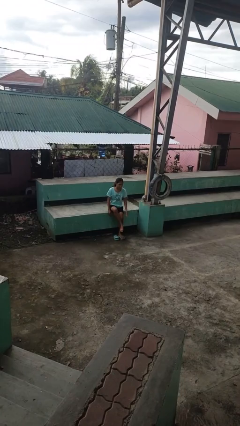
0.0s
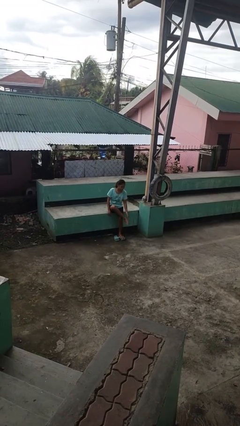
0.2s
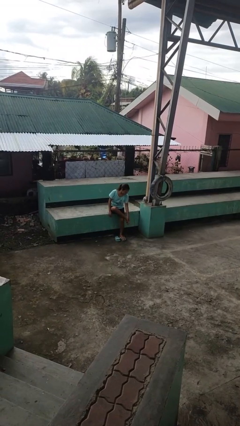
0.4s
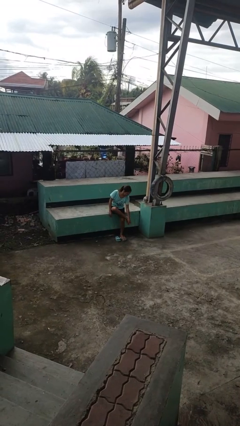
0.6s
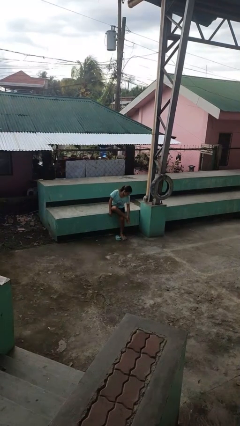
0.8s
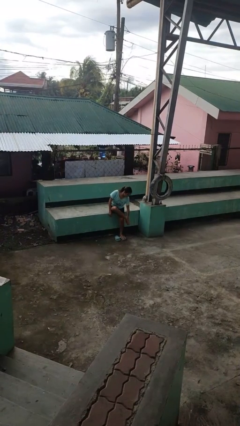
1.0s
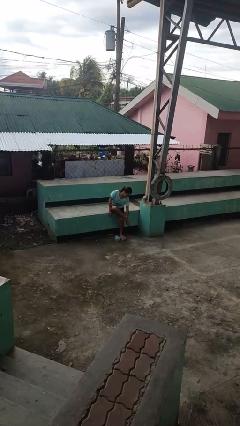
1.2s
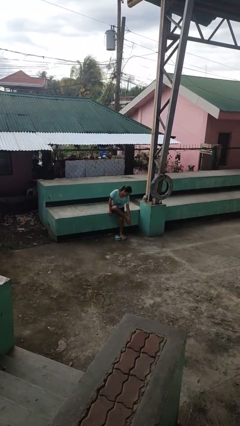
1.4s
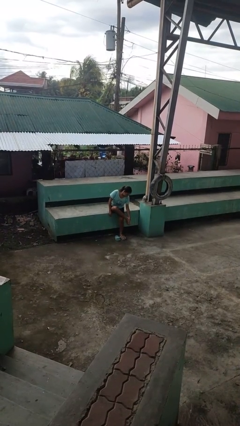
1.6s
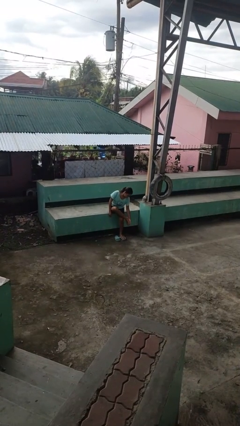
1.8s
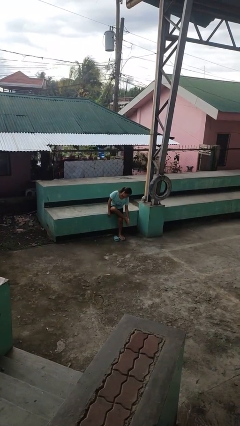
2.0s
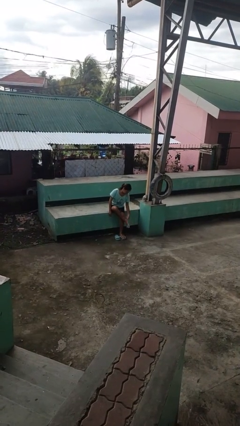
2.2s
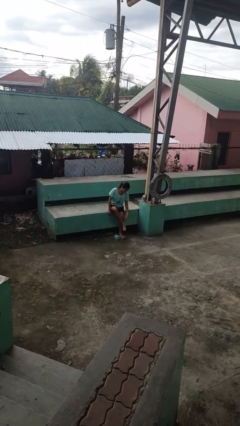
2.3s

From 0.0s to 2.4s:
person rubs foot

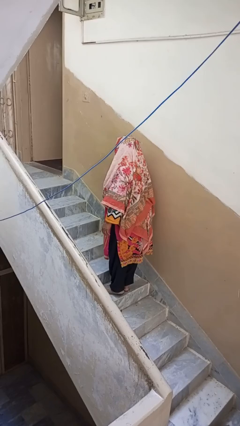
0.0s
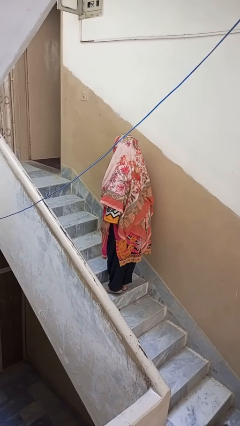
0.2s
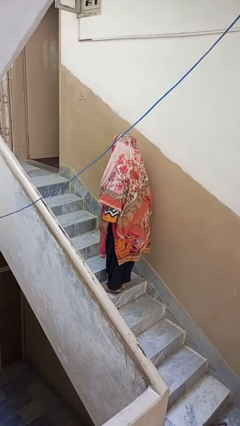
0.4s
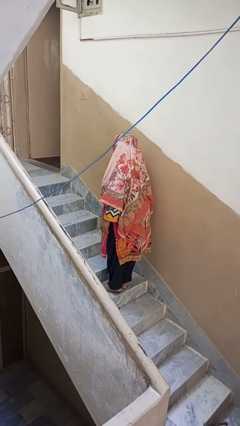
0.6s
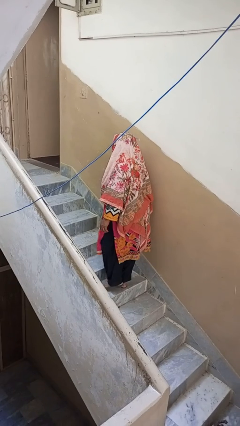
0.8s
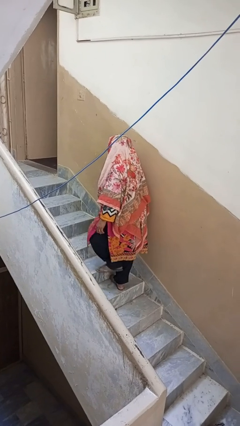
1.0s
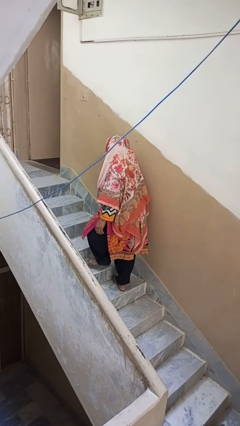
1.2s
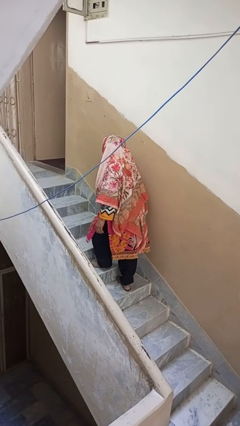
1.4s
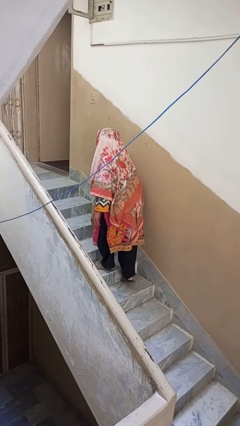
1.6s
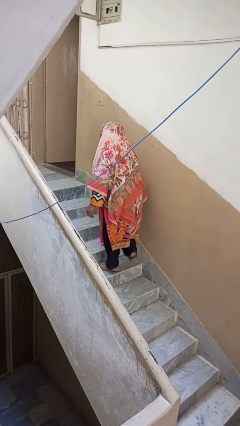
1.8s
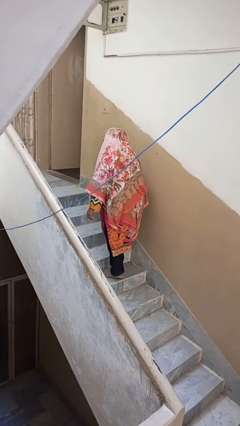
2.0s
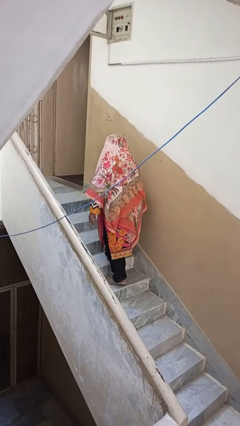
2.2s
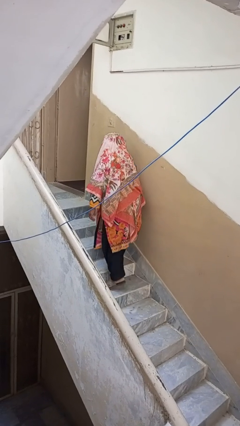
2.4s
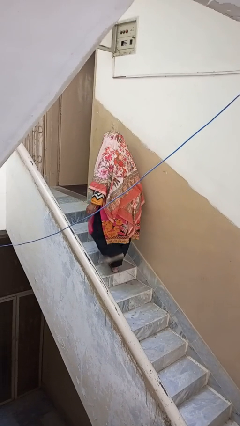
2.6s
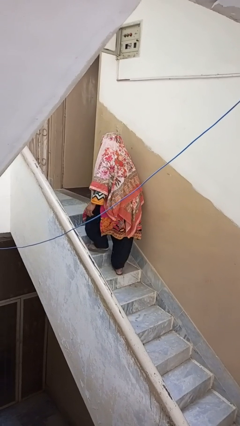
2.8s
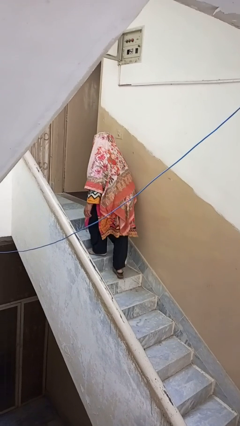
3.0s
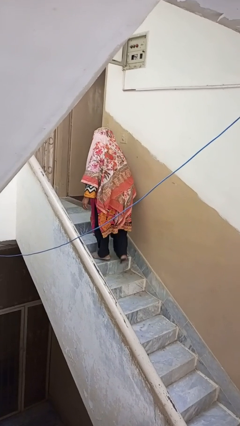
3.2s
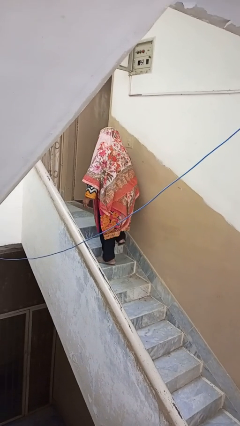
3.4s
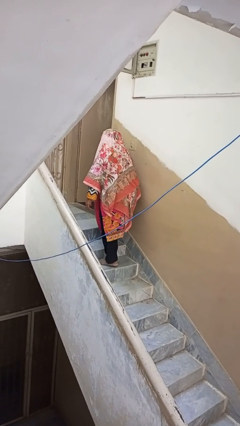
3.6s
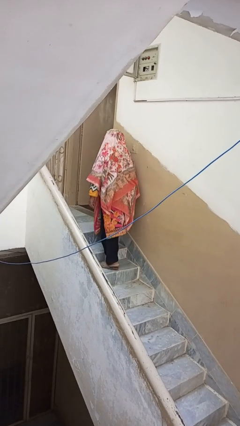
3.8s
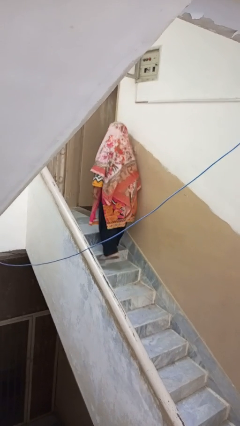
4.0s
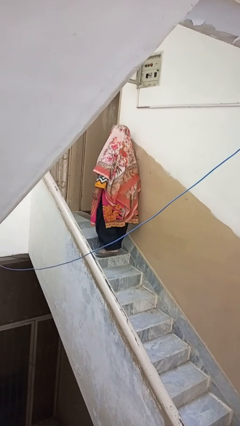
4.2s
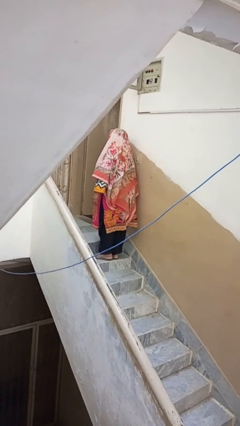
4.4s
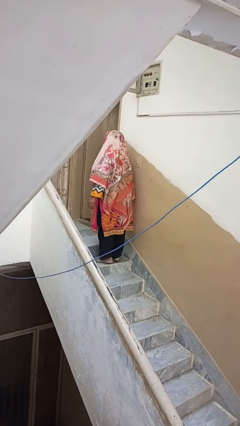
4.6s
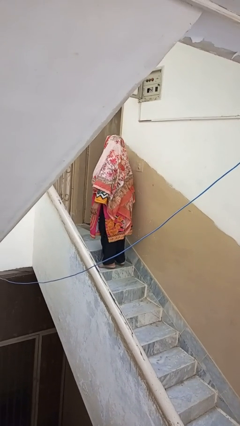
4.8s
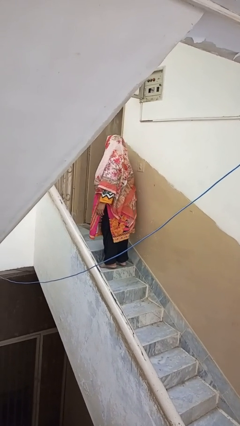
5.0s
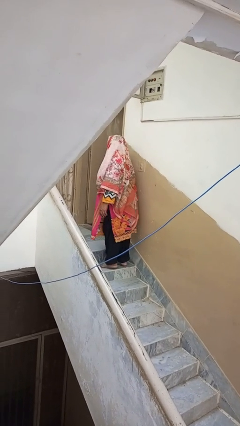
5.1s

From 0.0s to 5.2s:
person climbs up stairs

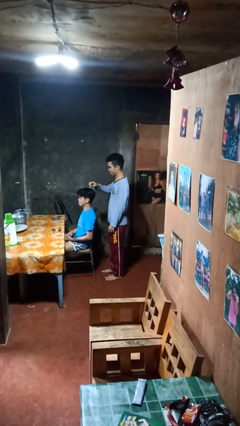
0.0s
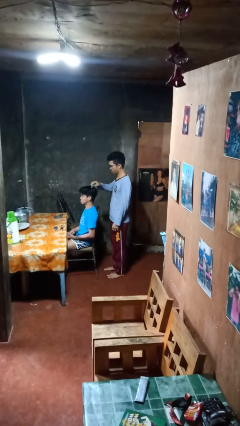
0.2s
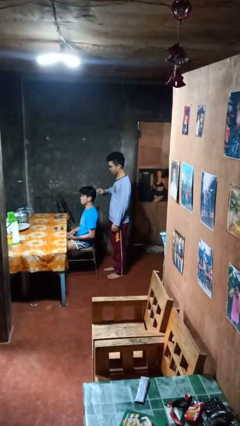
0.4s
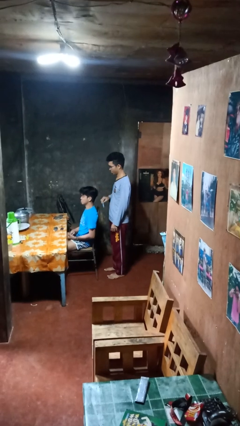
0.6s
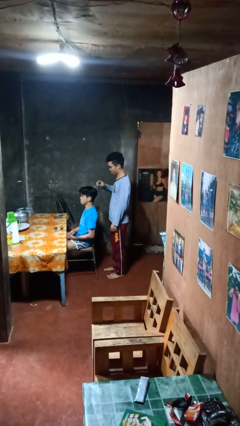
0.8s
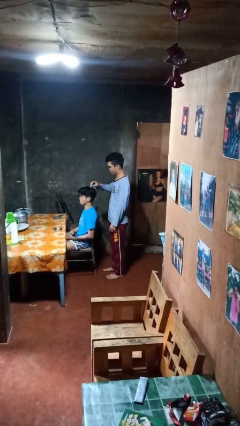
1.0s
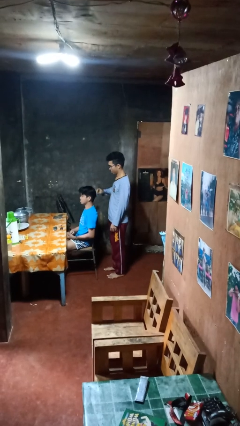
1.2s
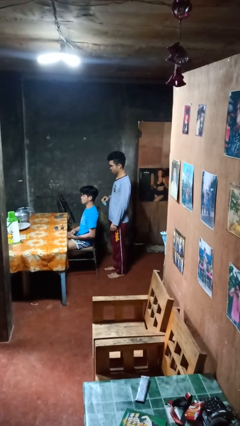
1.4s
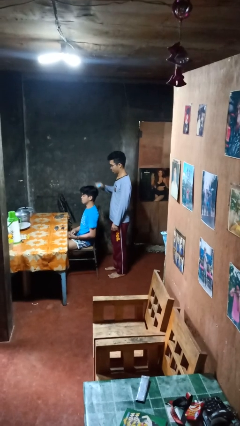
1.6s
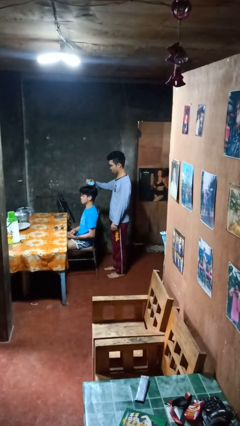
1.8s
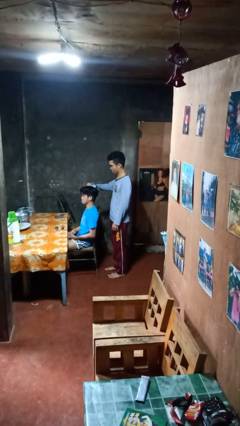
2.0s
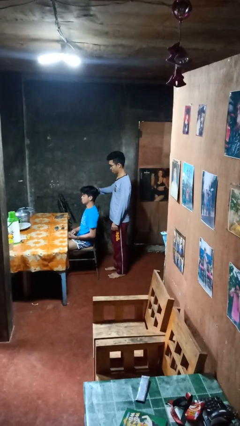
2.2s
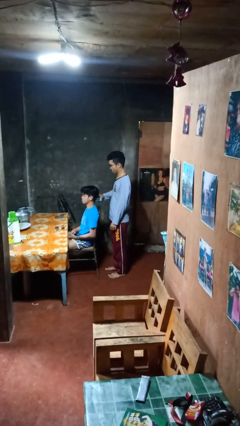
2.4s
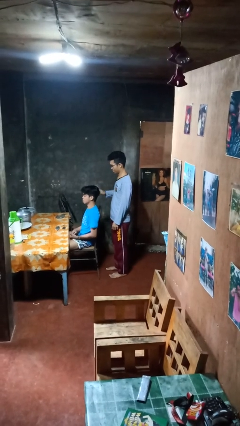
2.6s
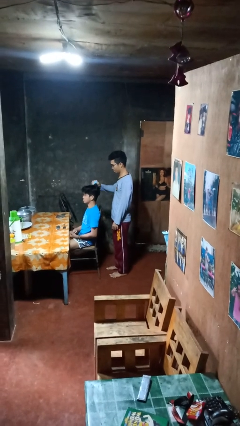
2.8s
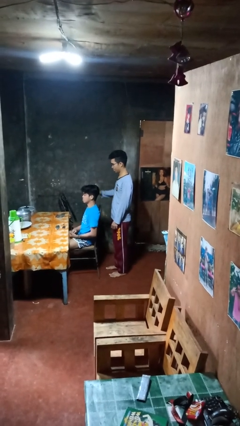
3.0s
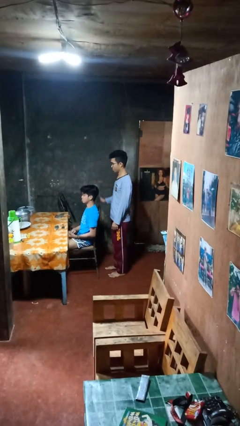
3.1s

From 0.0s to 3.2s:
person brushes hair of person

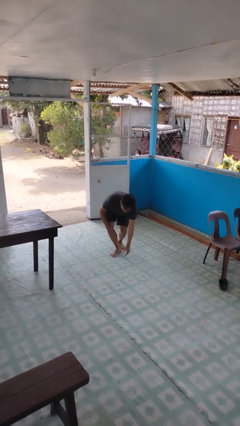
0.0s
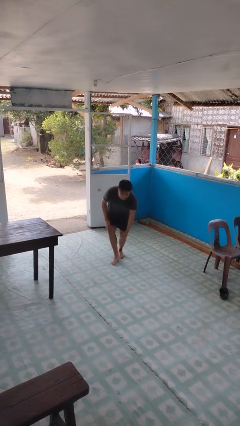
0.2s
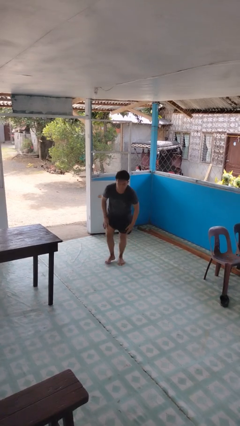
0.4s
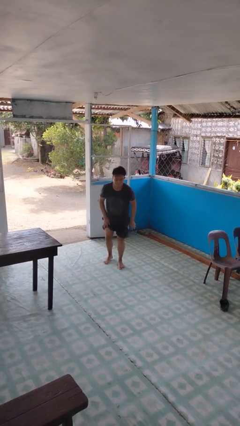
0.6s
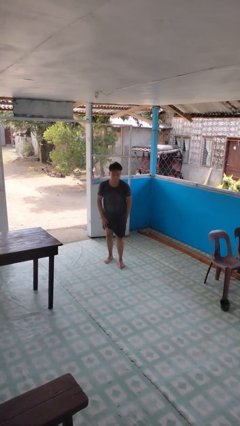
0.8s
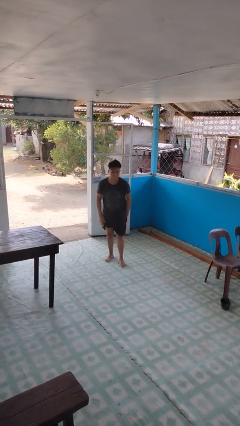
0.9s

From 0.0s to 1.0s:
person stands up from floor

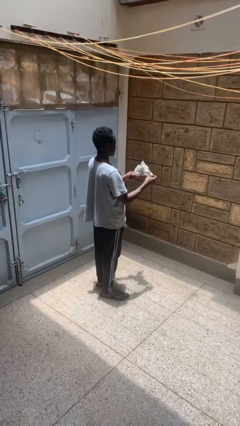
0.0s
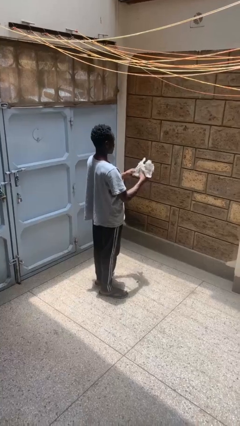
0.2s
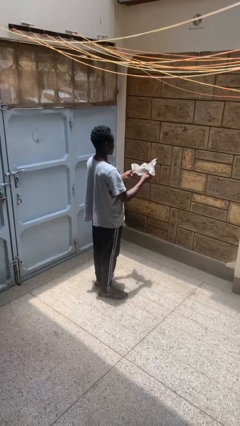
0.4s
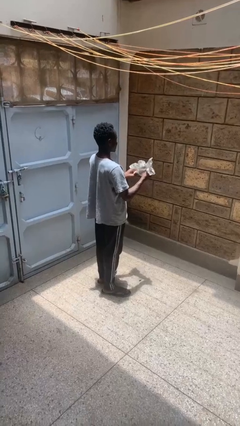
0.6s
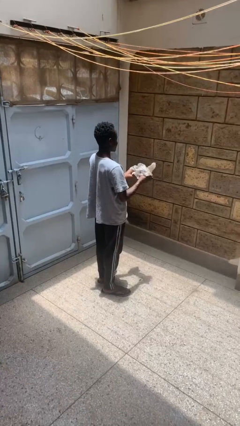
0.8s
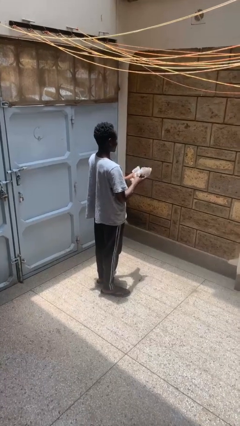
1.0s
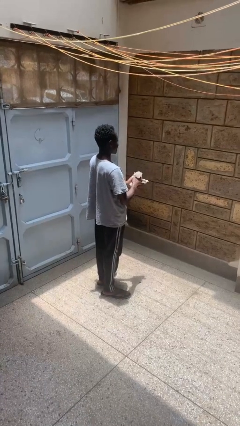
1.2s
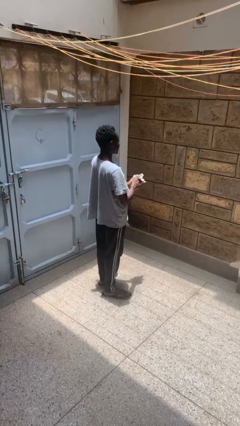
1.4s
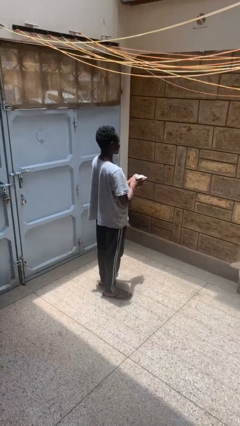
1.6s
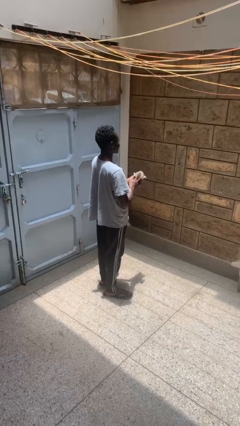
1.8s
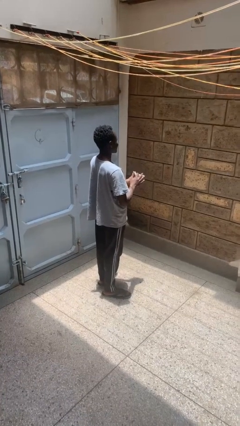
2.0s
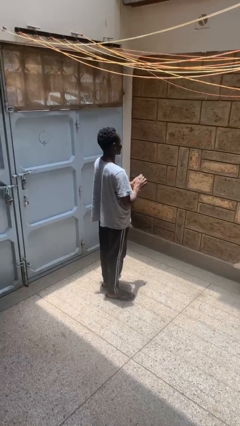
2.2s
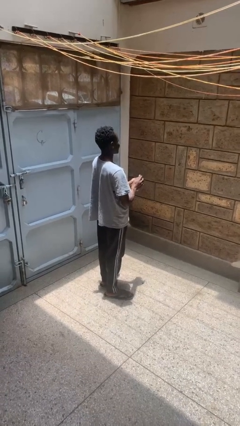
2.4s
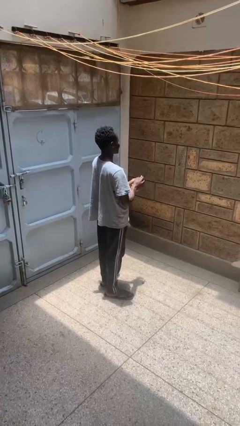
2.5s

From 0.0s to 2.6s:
person crumples paper

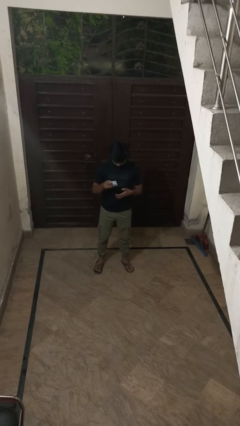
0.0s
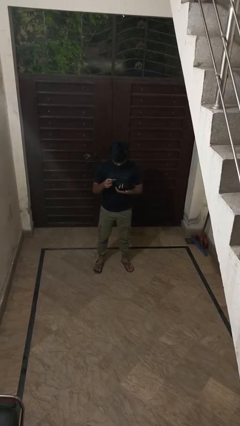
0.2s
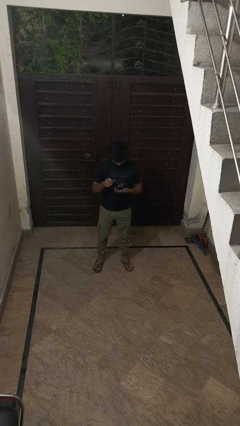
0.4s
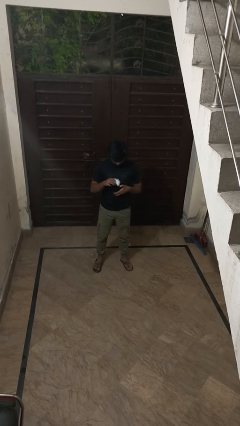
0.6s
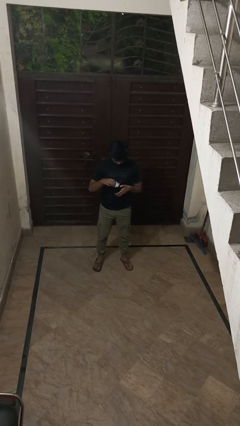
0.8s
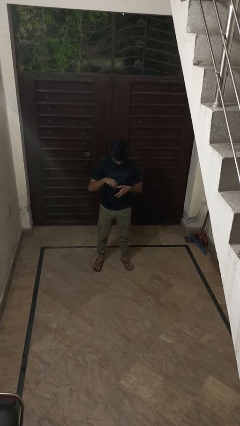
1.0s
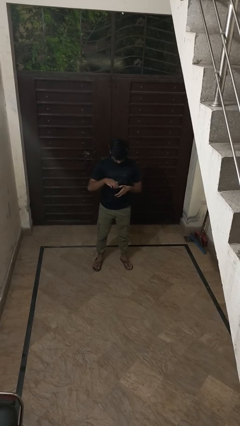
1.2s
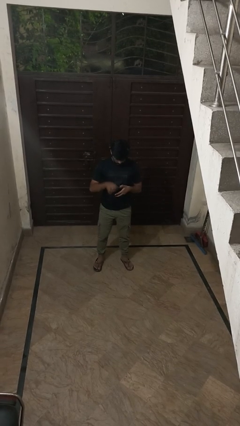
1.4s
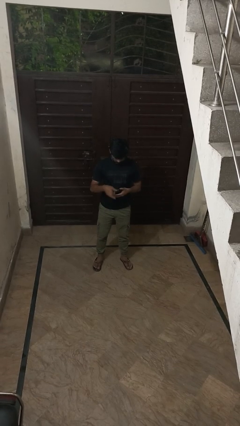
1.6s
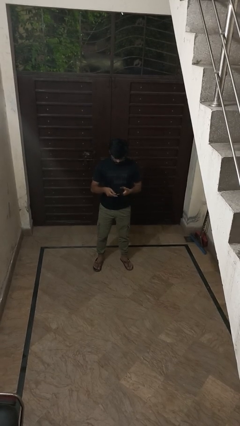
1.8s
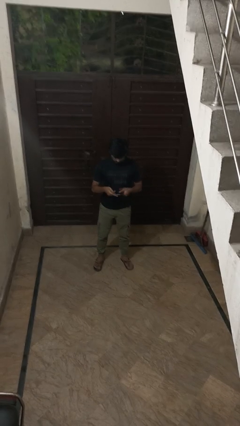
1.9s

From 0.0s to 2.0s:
person puts object into purse

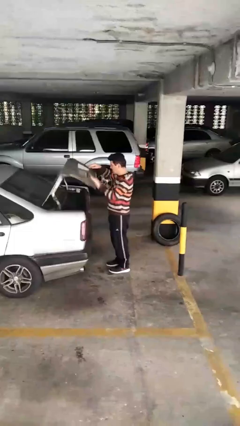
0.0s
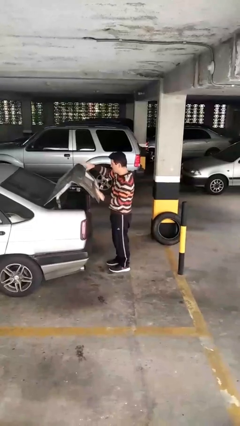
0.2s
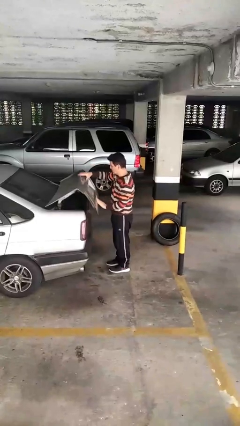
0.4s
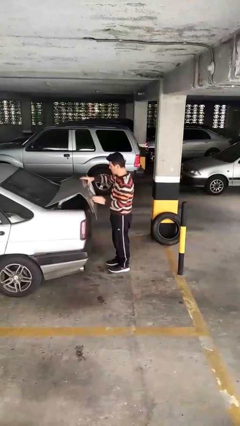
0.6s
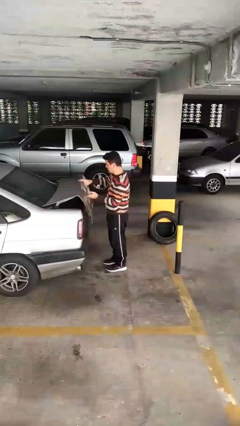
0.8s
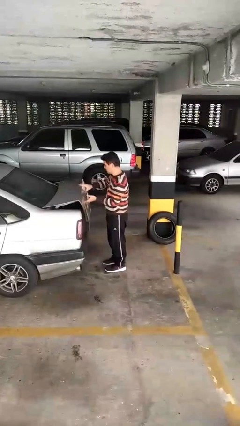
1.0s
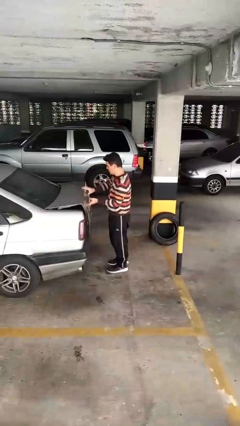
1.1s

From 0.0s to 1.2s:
person closes car trunk
